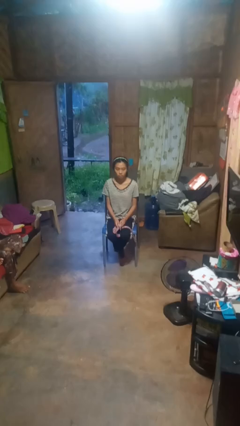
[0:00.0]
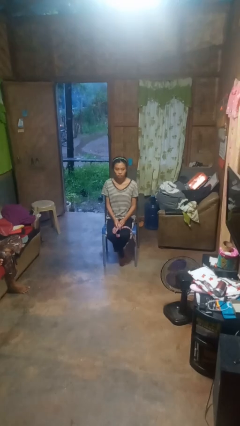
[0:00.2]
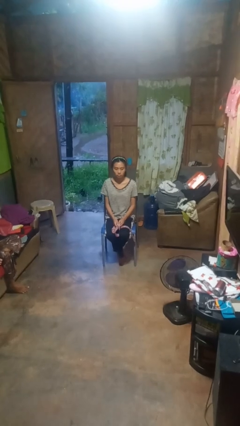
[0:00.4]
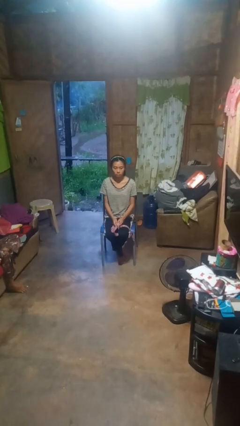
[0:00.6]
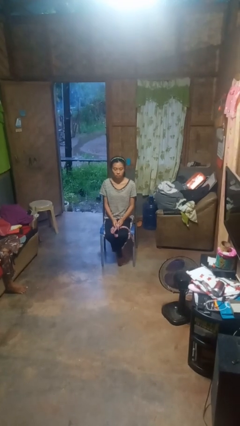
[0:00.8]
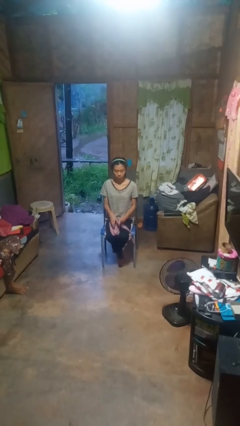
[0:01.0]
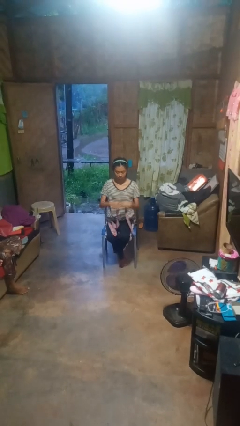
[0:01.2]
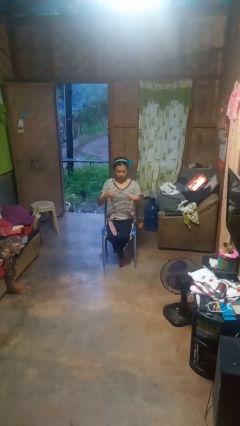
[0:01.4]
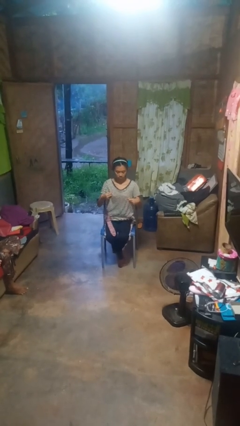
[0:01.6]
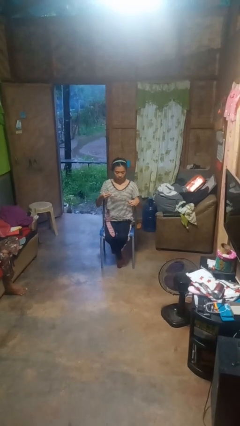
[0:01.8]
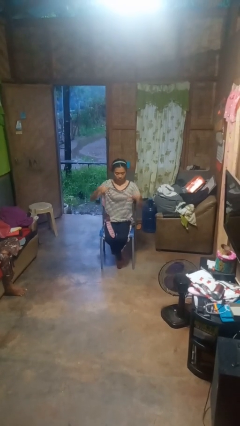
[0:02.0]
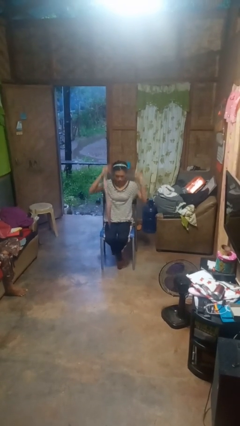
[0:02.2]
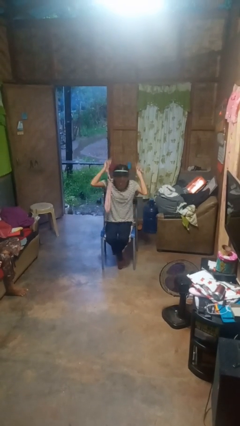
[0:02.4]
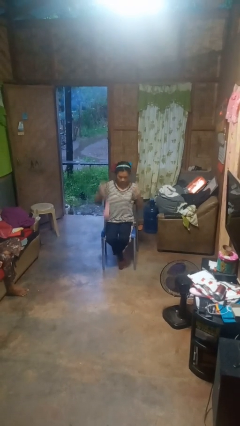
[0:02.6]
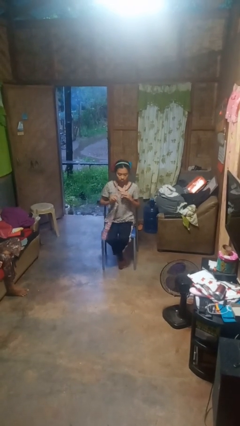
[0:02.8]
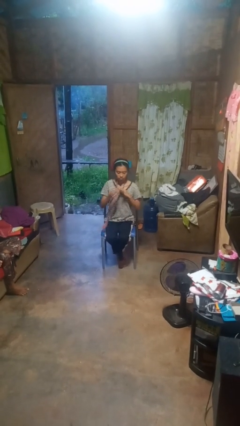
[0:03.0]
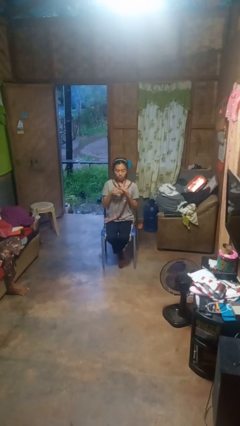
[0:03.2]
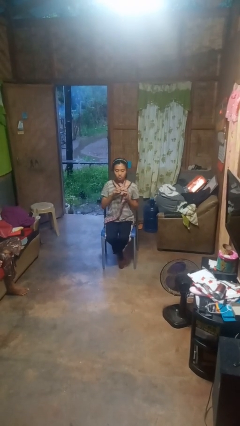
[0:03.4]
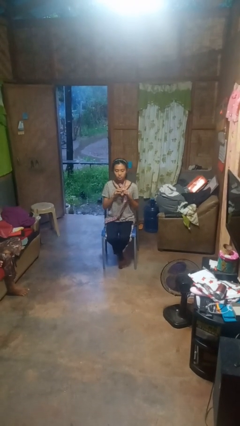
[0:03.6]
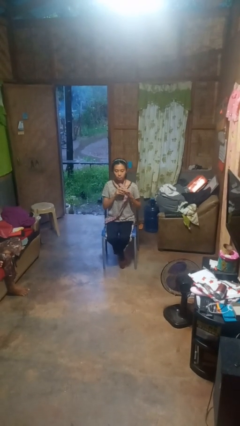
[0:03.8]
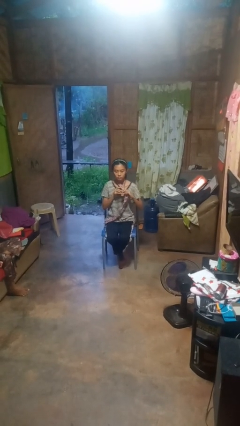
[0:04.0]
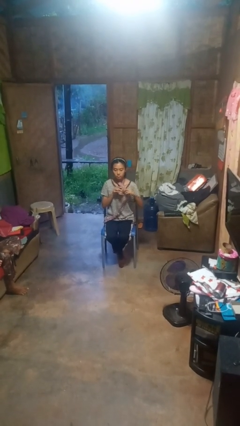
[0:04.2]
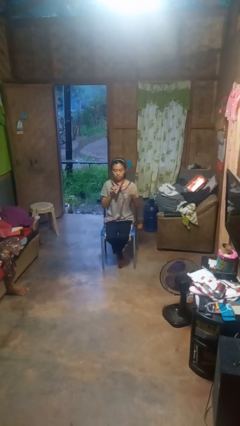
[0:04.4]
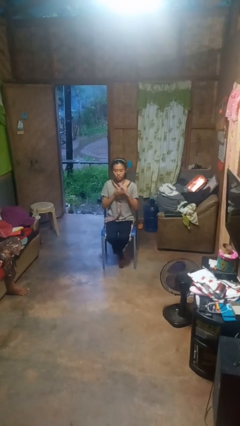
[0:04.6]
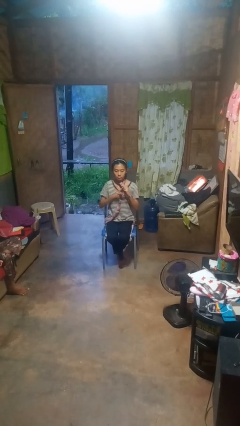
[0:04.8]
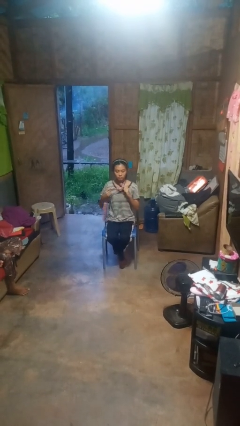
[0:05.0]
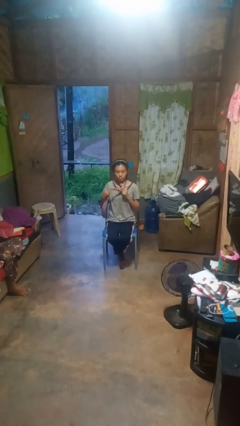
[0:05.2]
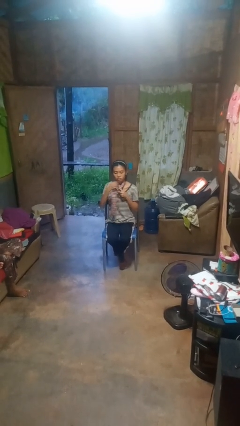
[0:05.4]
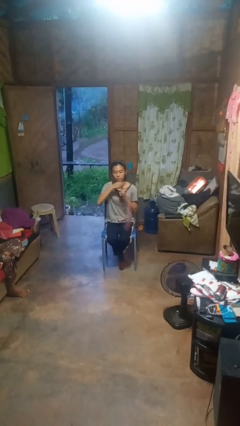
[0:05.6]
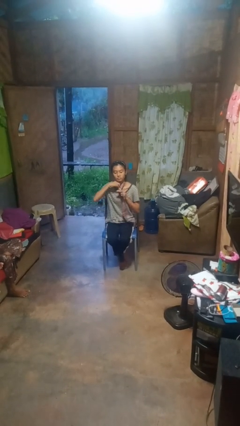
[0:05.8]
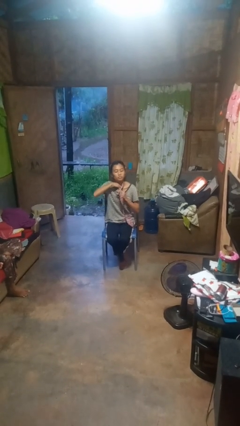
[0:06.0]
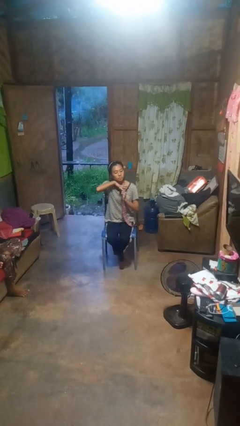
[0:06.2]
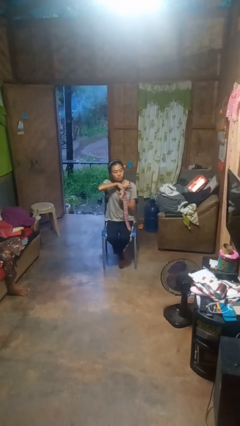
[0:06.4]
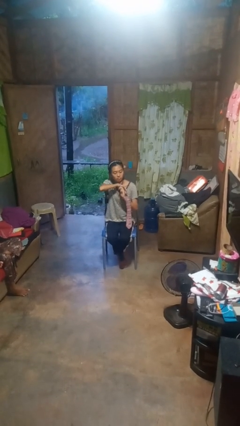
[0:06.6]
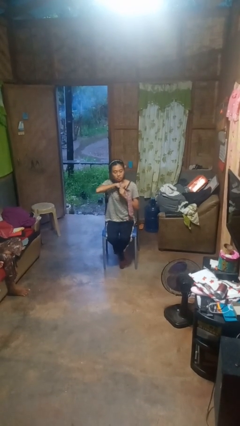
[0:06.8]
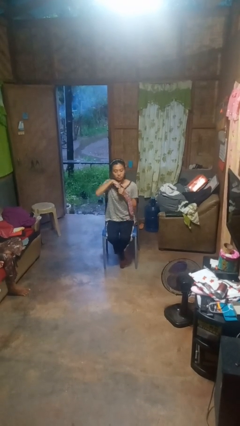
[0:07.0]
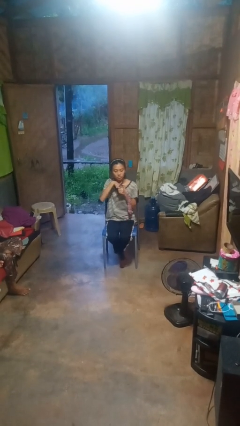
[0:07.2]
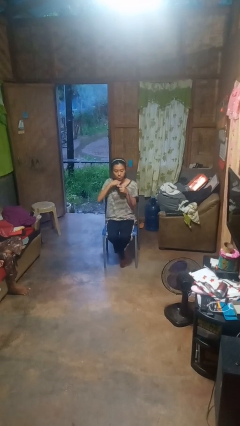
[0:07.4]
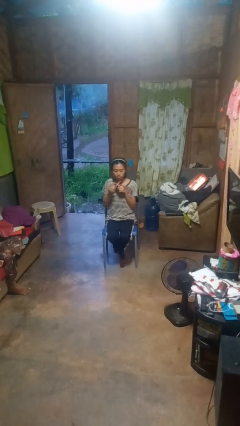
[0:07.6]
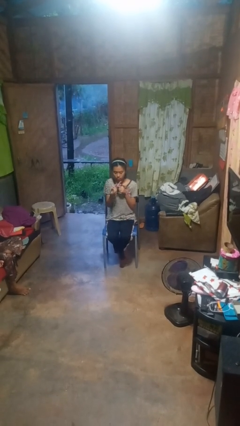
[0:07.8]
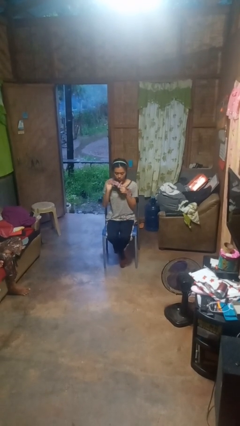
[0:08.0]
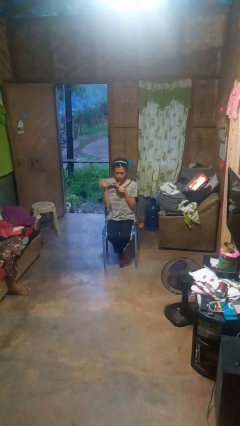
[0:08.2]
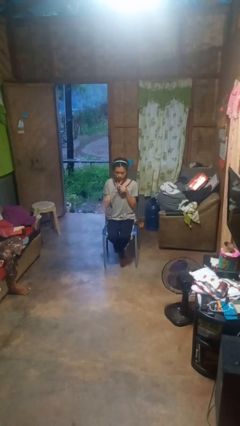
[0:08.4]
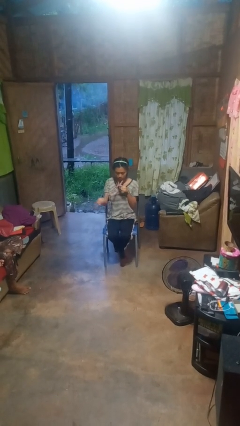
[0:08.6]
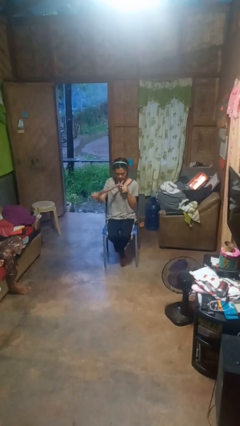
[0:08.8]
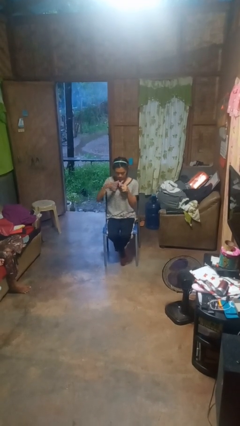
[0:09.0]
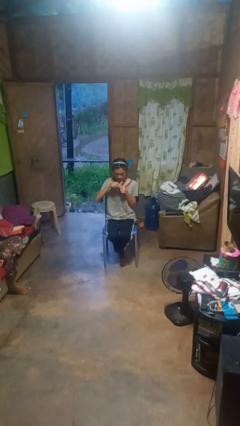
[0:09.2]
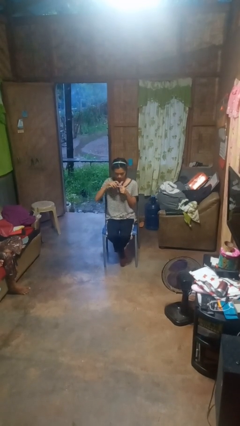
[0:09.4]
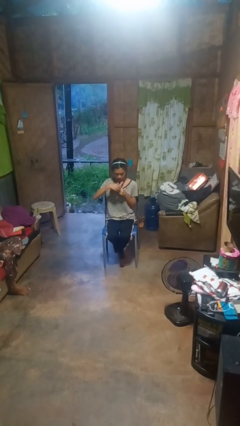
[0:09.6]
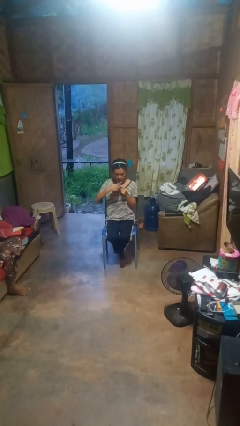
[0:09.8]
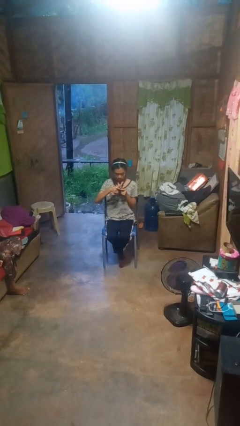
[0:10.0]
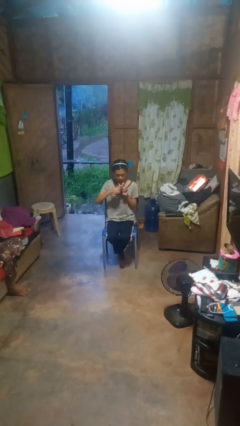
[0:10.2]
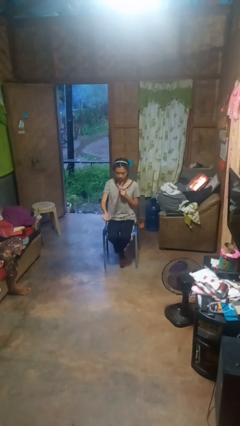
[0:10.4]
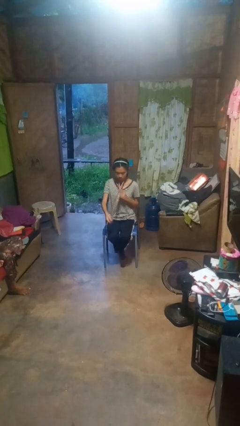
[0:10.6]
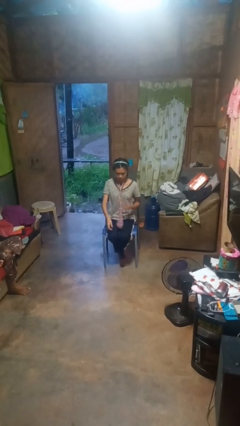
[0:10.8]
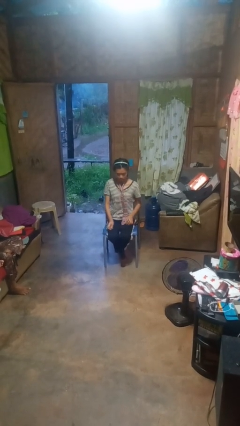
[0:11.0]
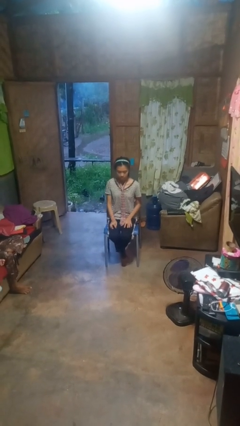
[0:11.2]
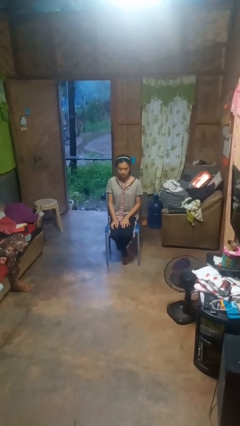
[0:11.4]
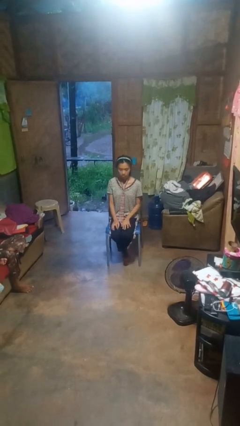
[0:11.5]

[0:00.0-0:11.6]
person puts on necktie

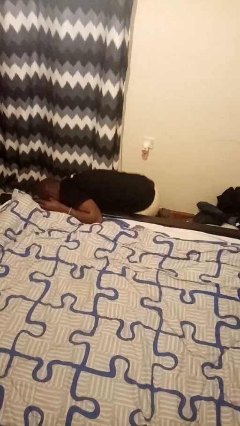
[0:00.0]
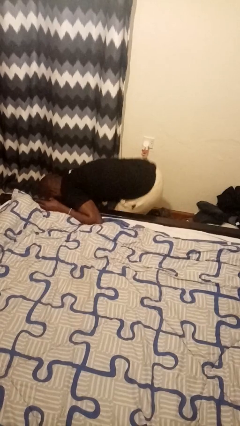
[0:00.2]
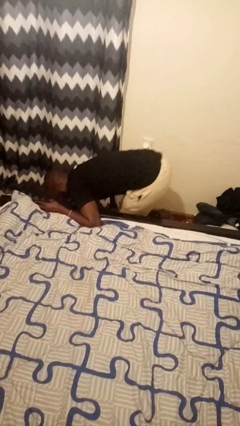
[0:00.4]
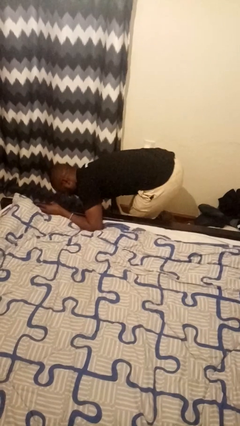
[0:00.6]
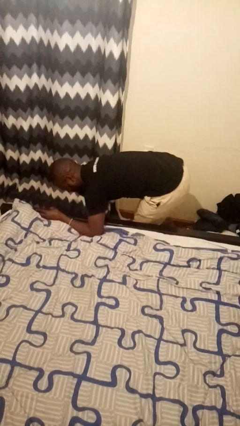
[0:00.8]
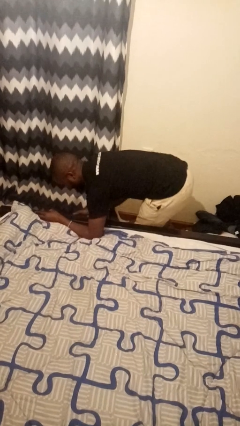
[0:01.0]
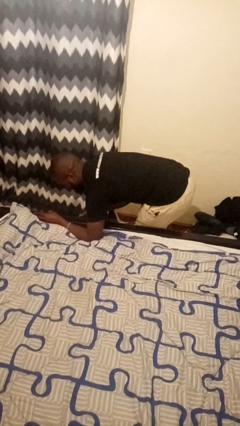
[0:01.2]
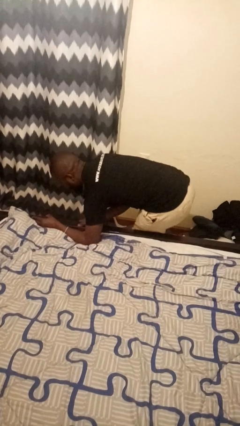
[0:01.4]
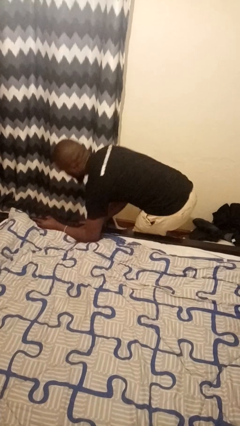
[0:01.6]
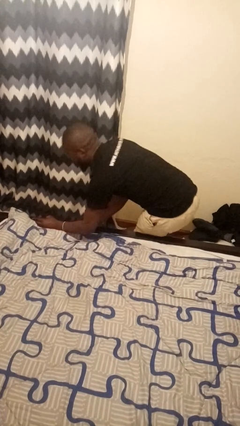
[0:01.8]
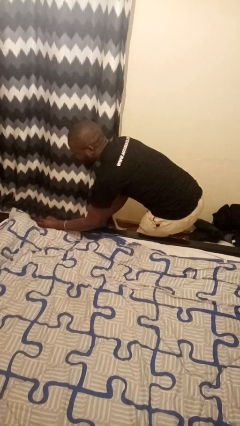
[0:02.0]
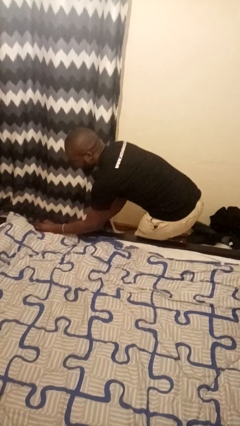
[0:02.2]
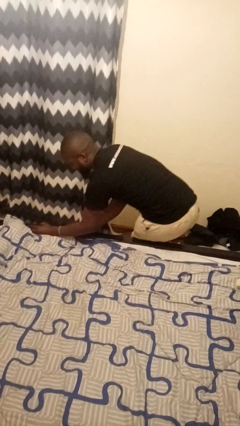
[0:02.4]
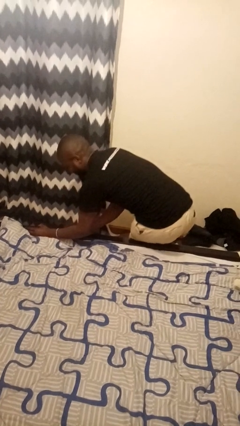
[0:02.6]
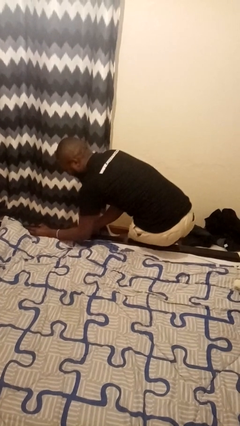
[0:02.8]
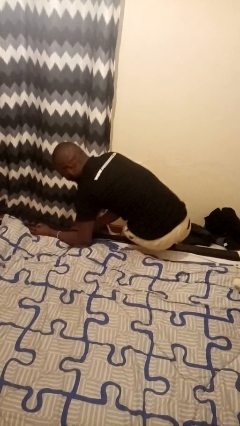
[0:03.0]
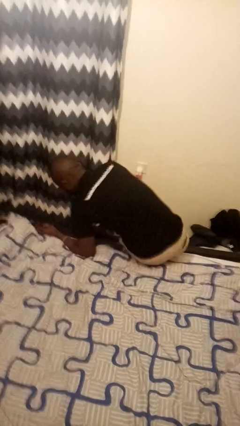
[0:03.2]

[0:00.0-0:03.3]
person stands up from floor

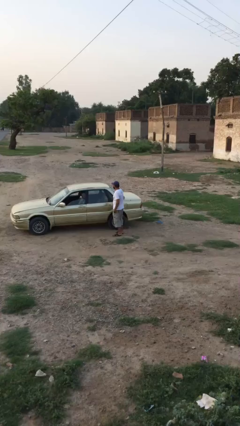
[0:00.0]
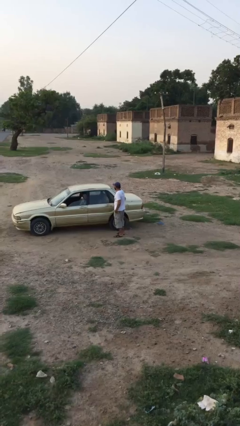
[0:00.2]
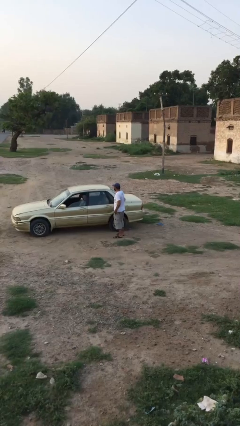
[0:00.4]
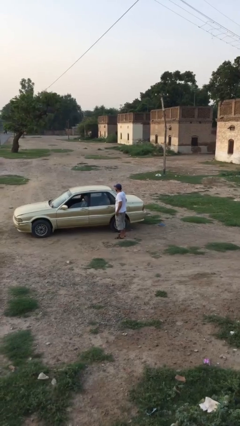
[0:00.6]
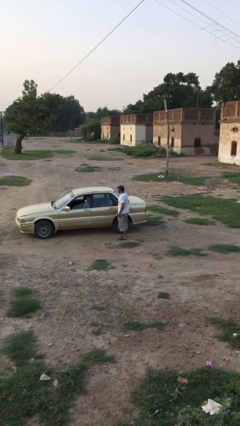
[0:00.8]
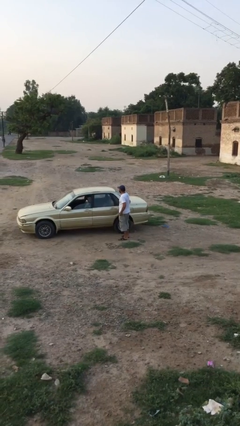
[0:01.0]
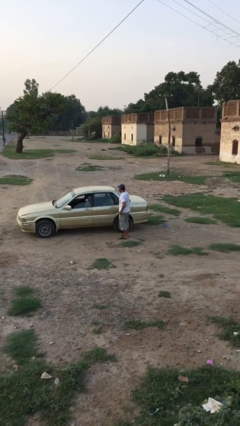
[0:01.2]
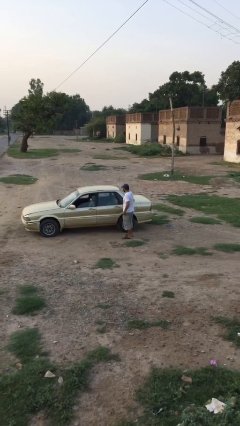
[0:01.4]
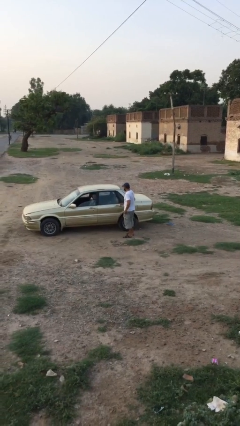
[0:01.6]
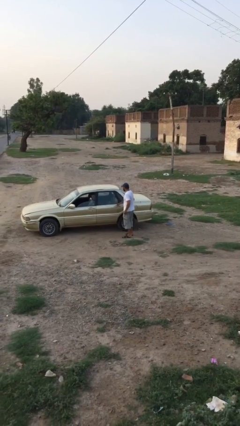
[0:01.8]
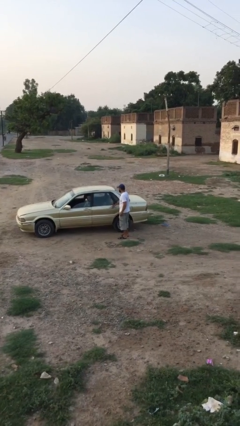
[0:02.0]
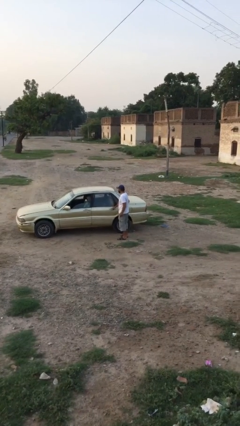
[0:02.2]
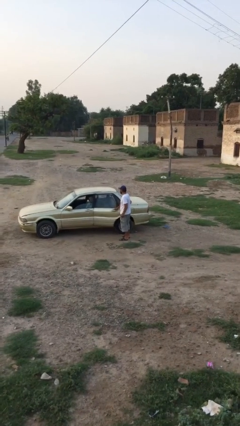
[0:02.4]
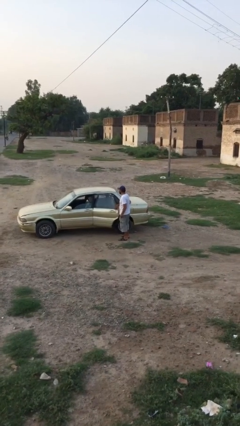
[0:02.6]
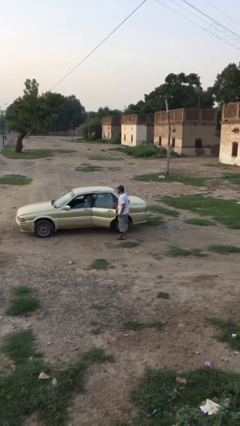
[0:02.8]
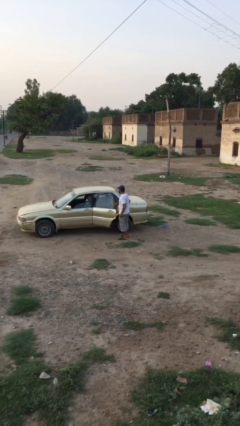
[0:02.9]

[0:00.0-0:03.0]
person opens car door

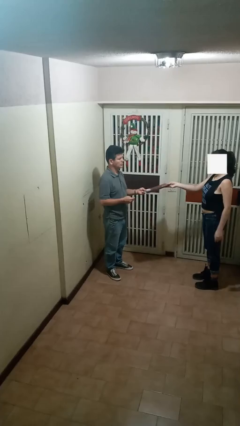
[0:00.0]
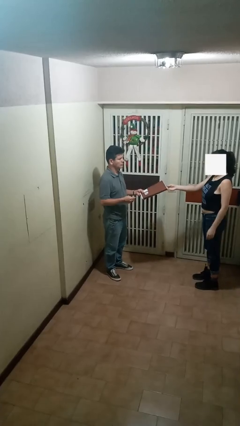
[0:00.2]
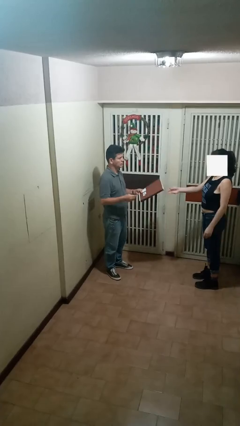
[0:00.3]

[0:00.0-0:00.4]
person transfers object to person
